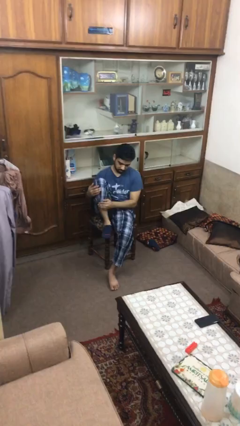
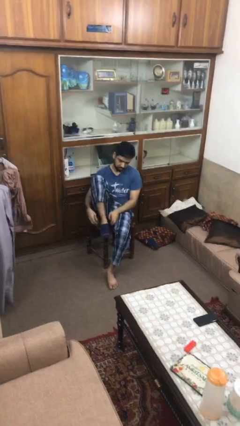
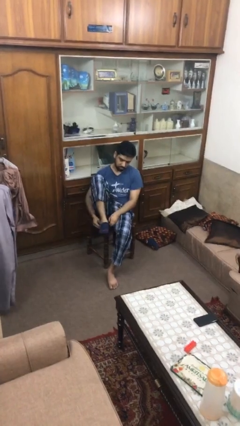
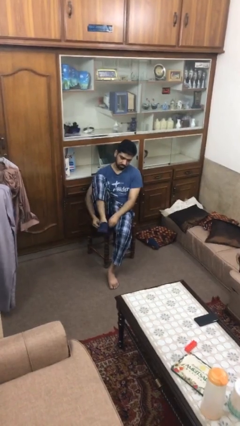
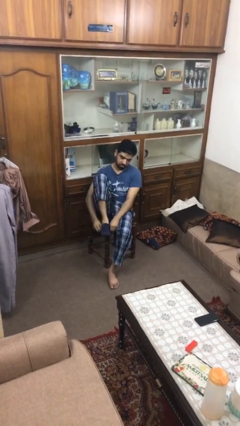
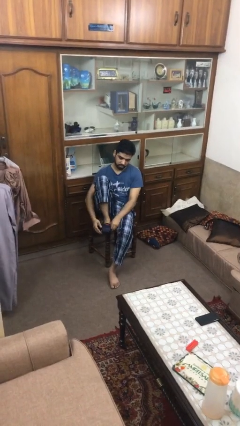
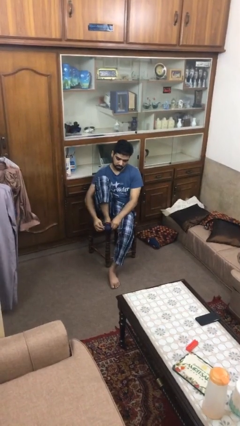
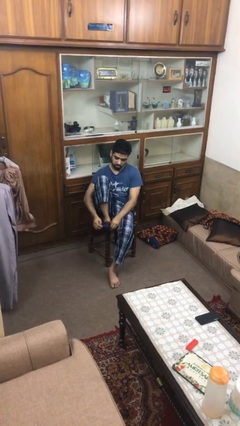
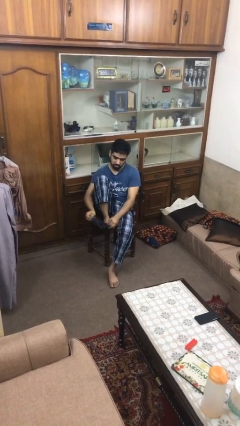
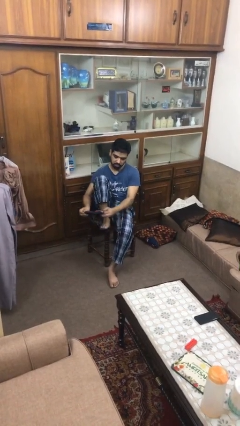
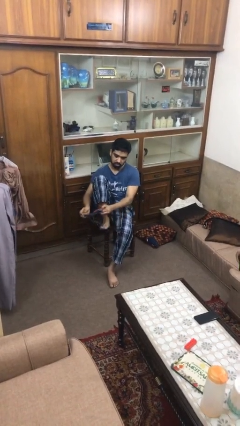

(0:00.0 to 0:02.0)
person takes off socks

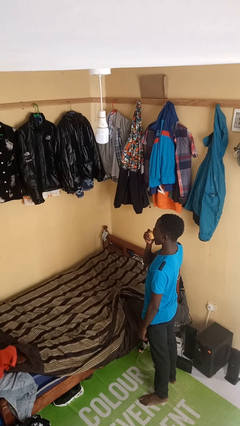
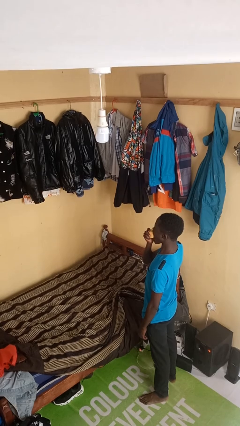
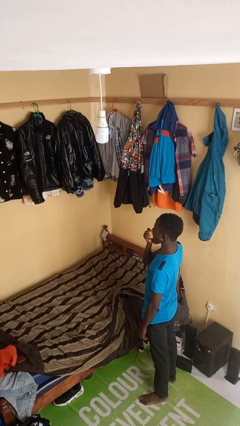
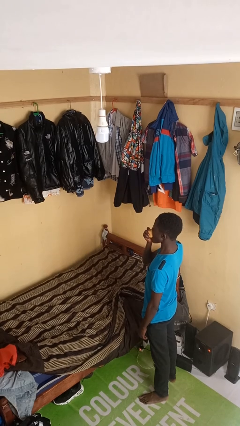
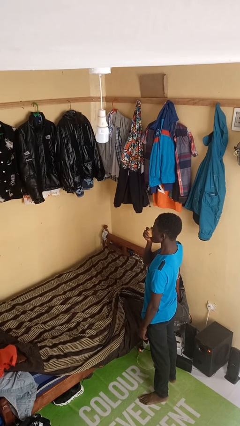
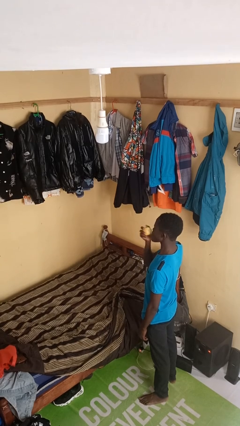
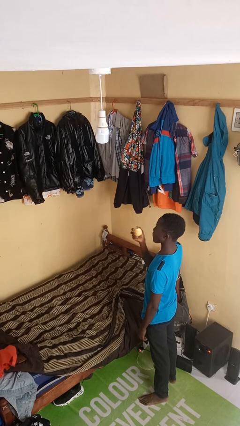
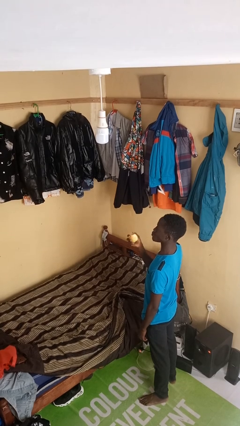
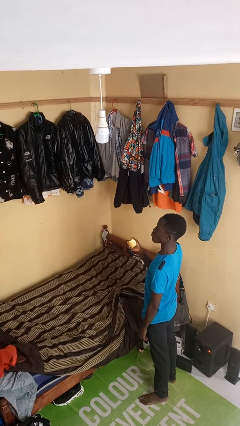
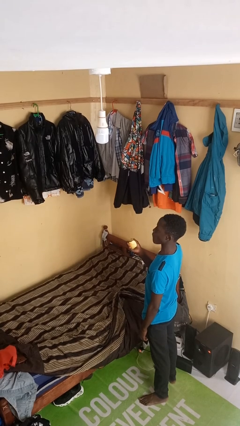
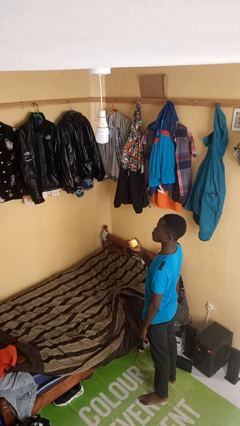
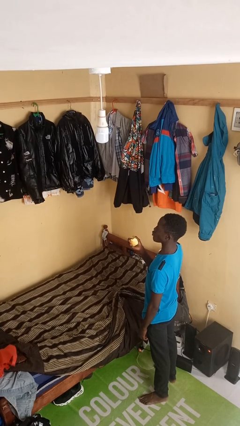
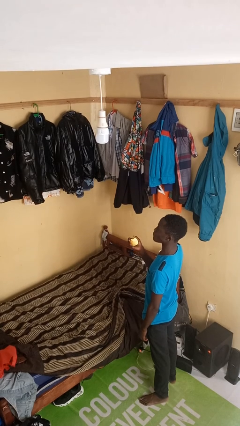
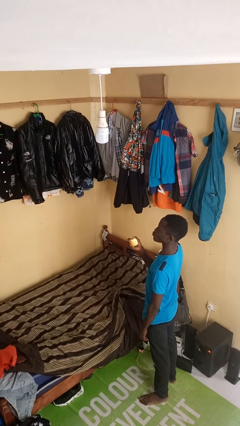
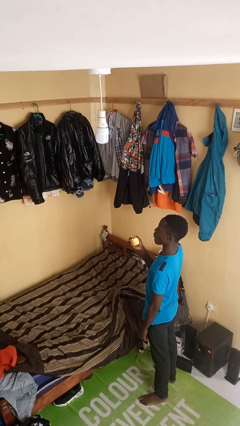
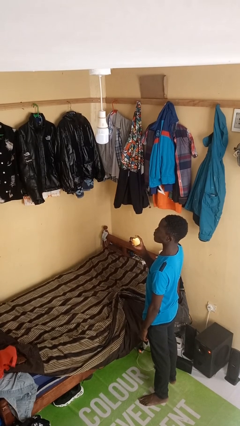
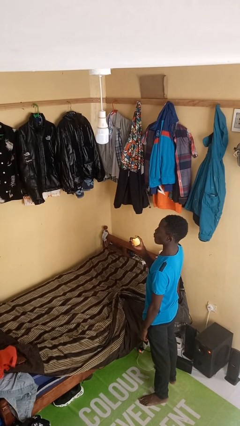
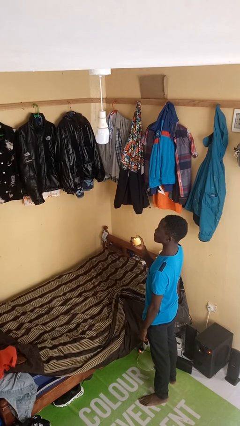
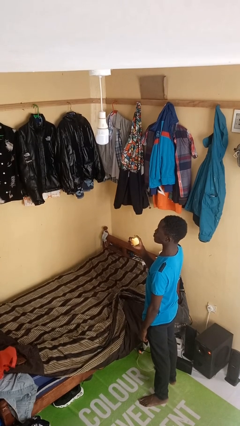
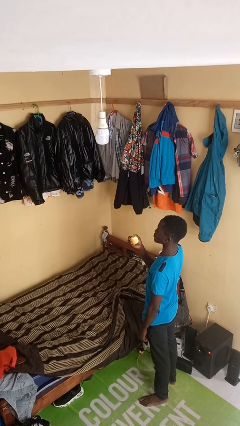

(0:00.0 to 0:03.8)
person eats apple

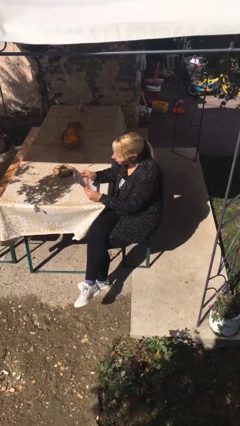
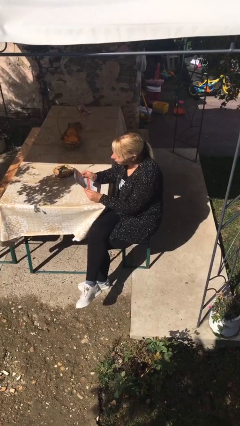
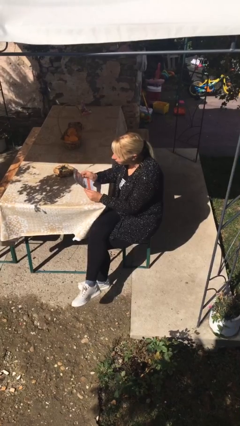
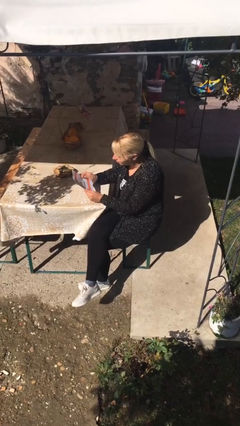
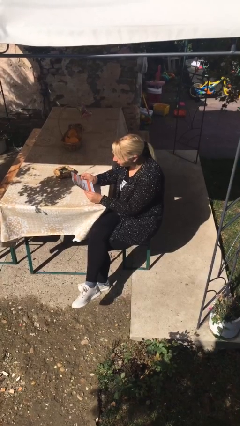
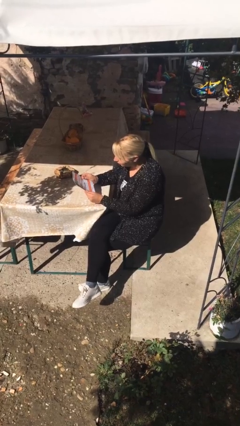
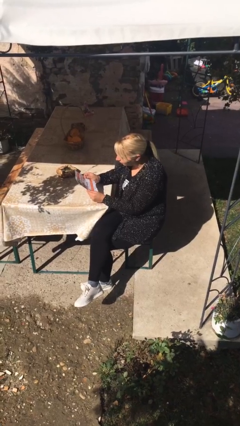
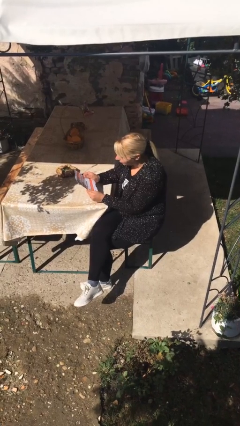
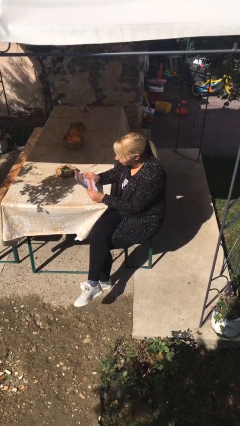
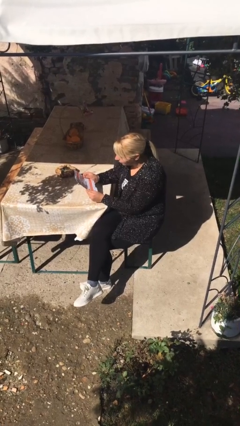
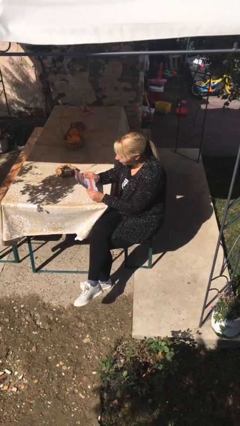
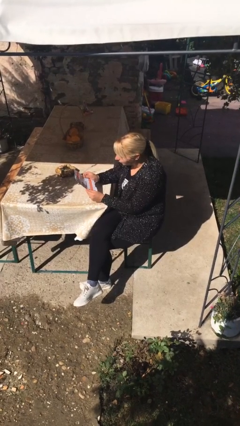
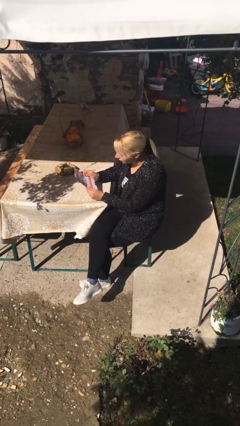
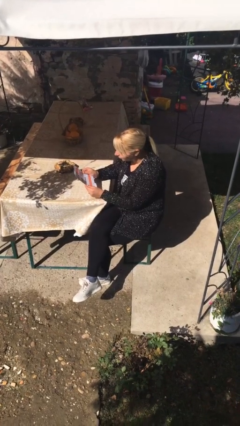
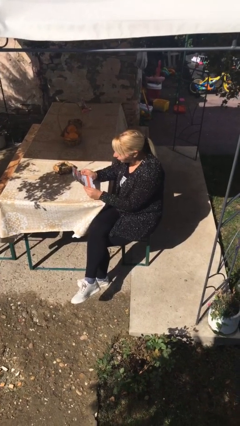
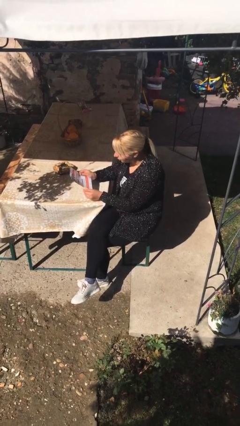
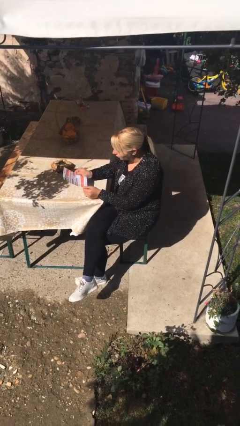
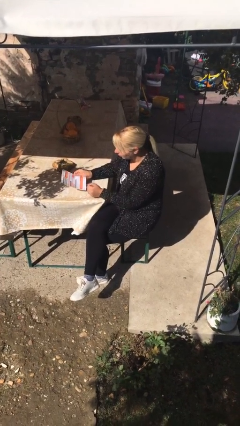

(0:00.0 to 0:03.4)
person reads document

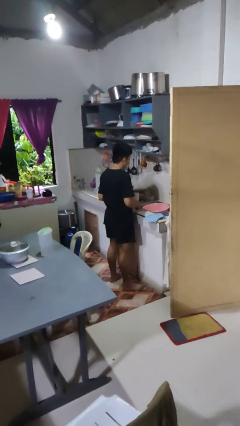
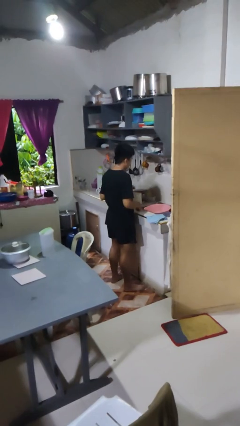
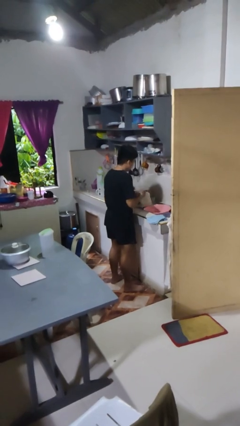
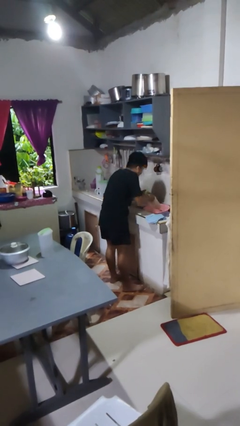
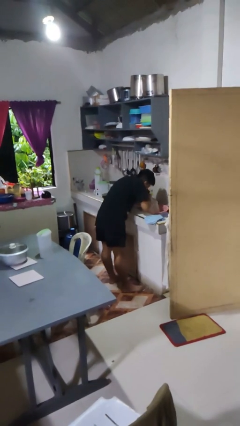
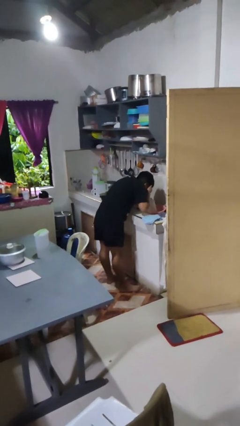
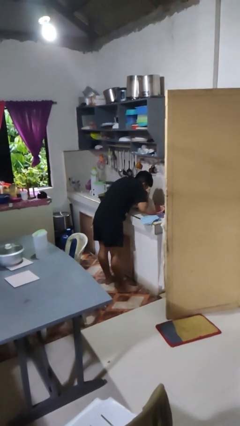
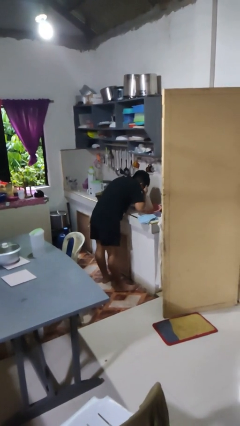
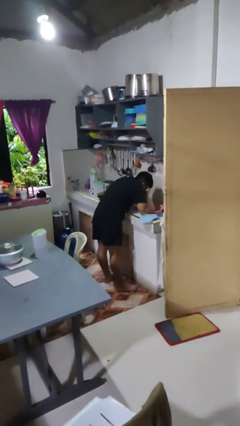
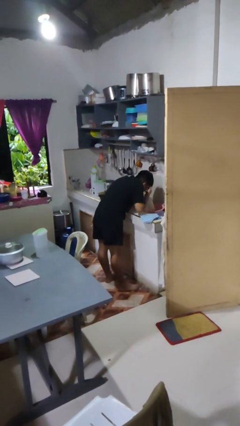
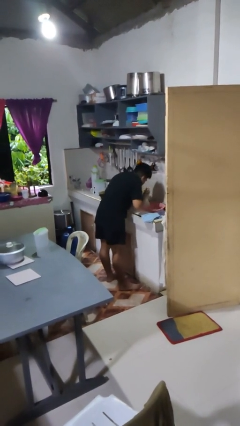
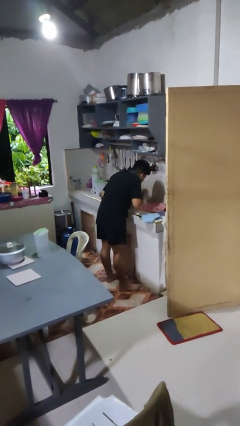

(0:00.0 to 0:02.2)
person washes face

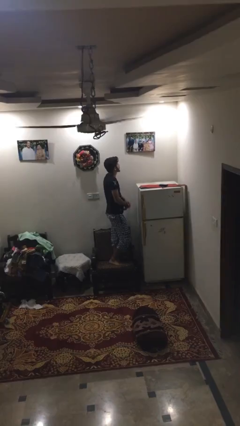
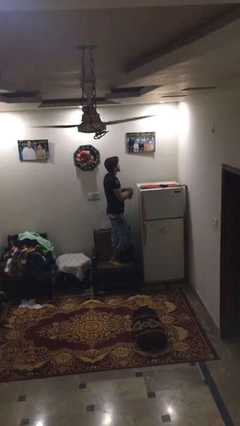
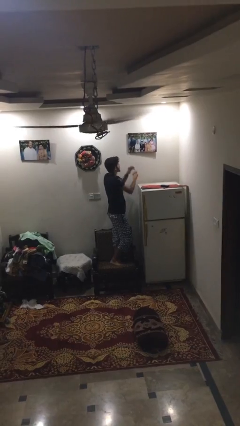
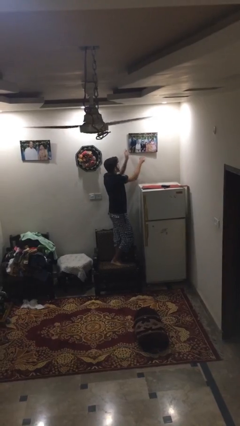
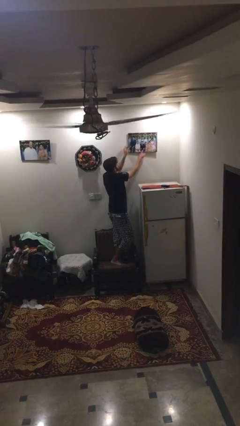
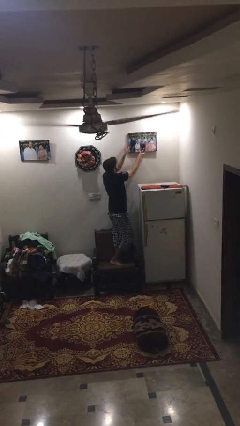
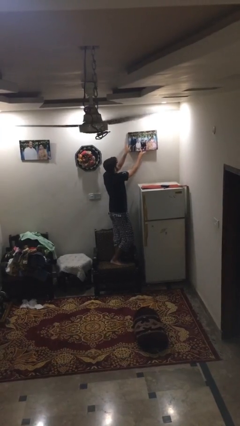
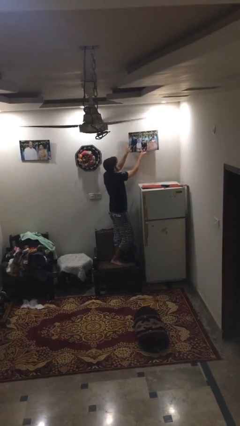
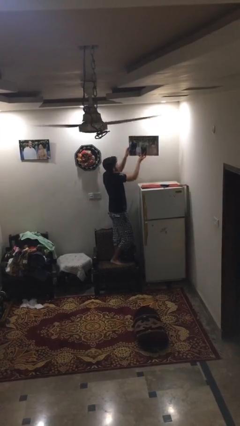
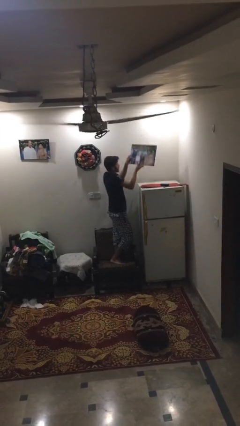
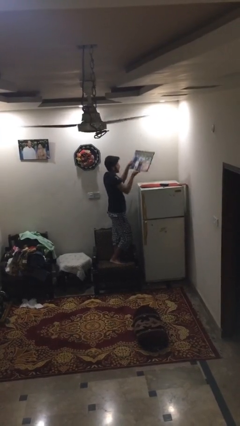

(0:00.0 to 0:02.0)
person takes down picture frame

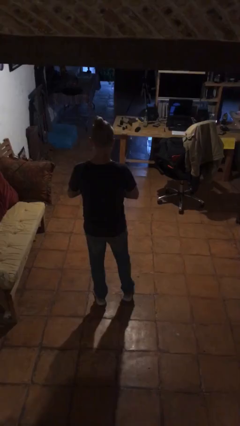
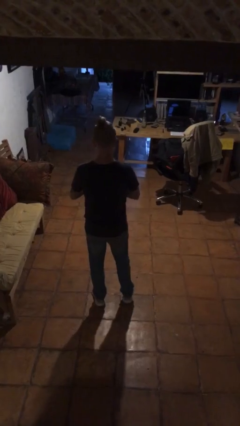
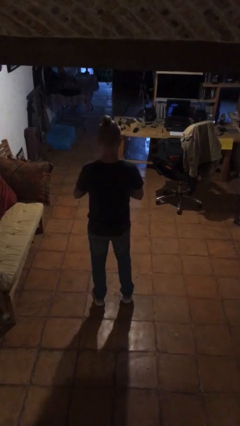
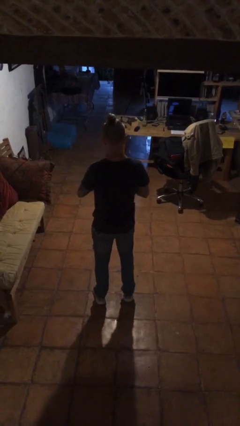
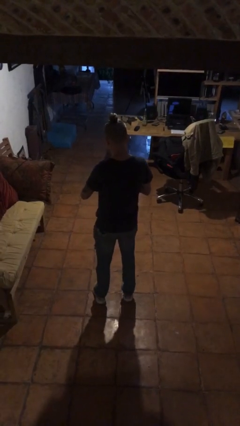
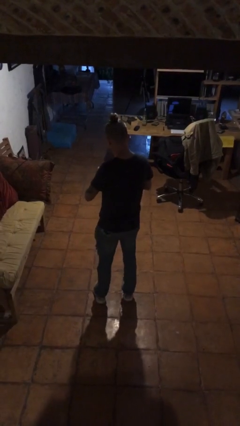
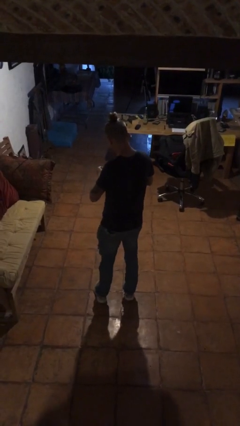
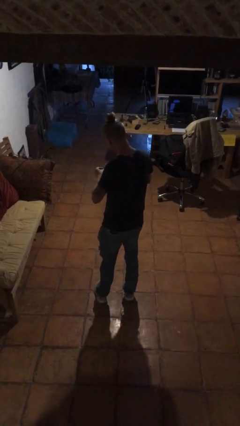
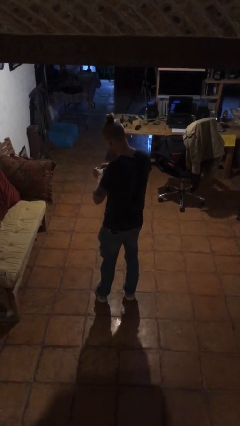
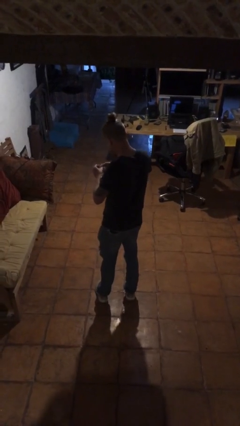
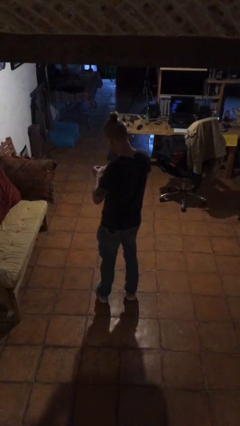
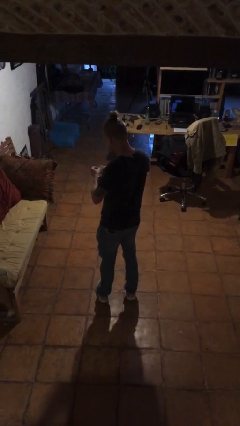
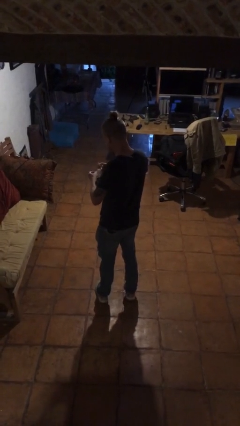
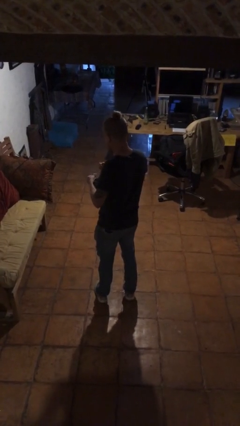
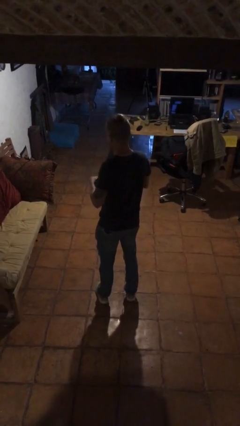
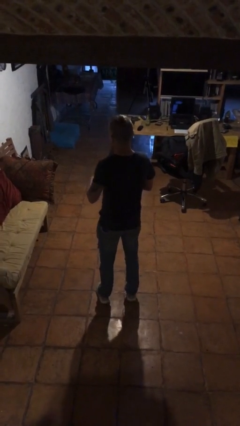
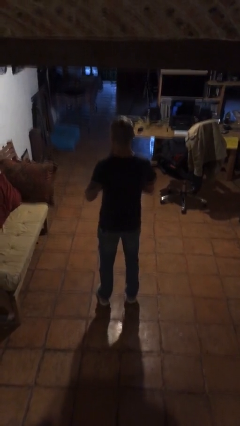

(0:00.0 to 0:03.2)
person takes medicine pills

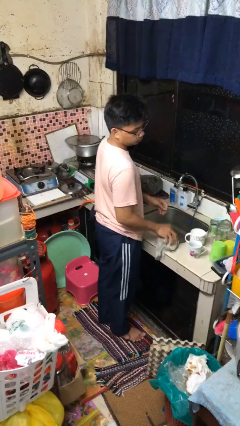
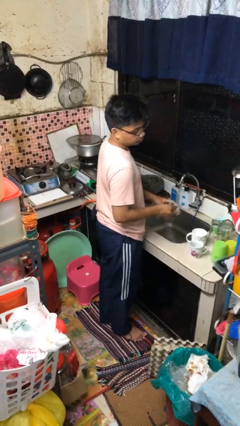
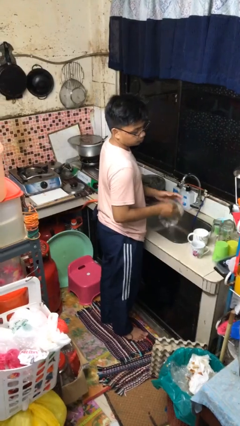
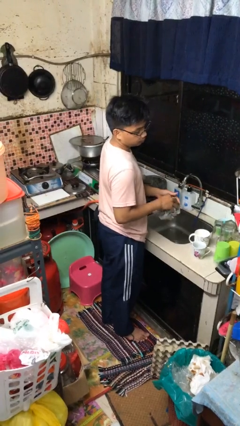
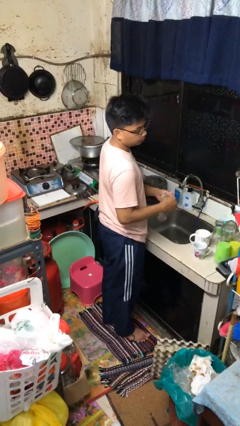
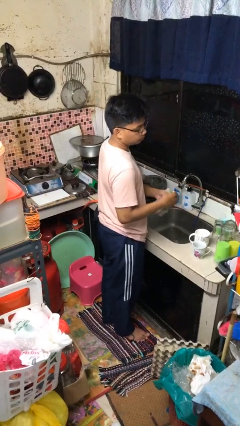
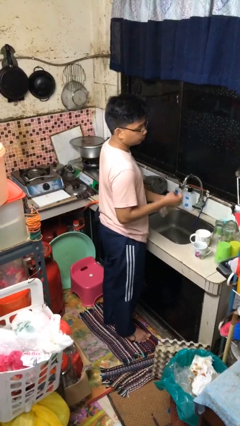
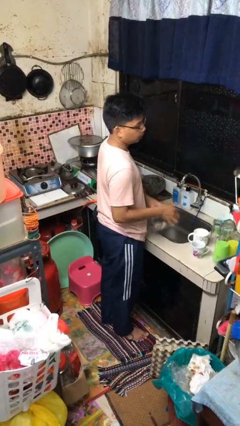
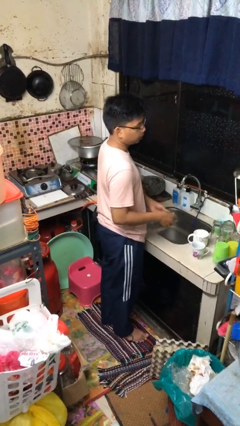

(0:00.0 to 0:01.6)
person dries hands with towel
